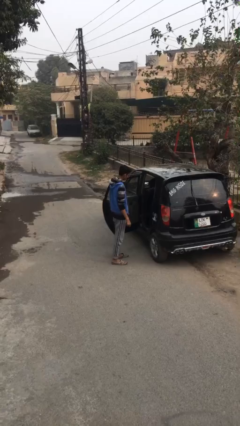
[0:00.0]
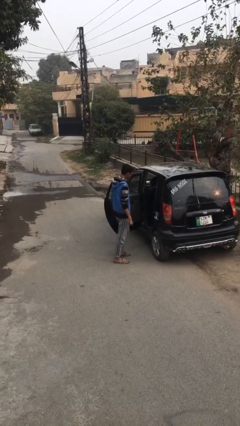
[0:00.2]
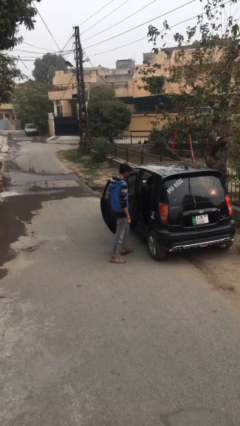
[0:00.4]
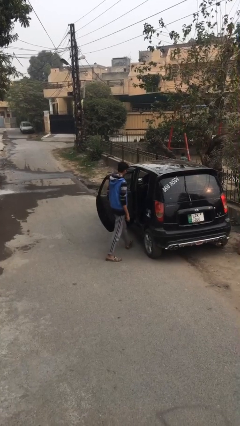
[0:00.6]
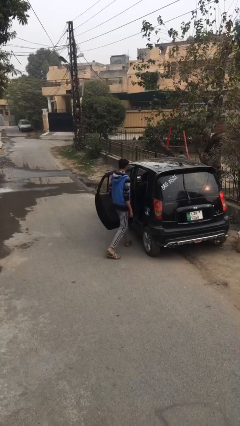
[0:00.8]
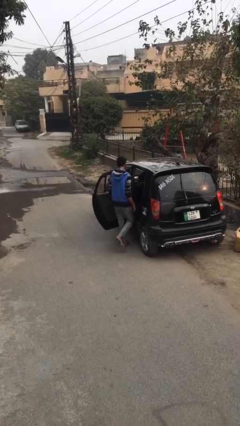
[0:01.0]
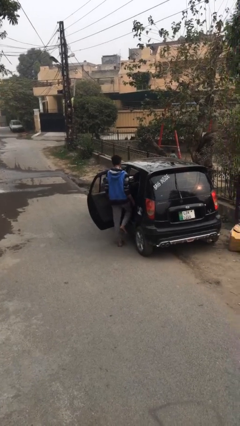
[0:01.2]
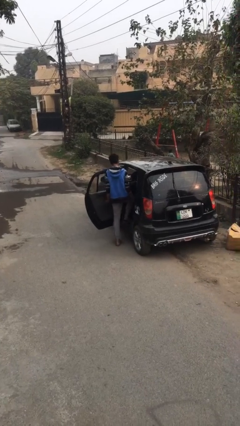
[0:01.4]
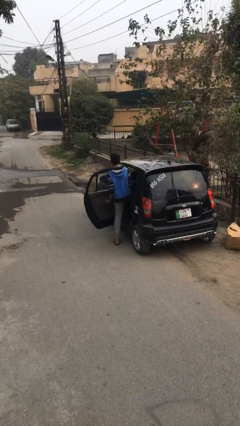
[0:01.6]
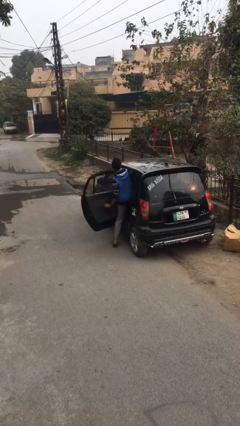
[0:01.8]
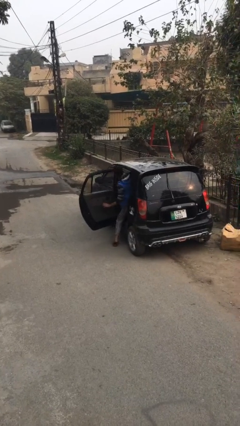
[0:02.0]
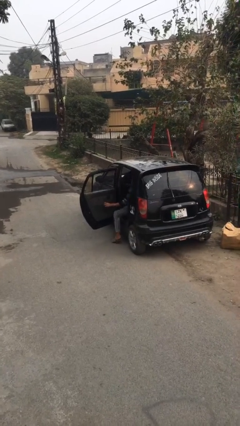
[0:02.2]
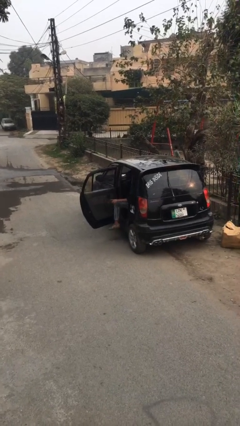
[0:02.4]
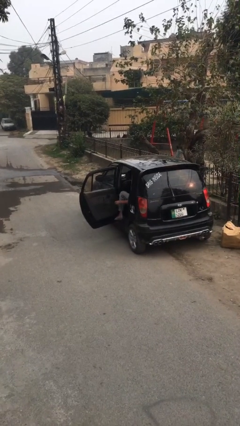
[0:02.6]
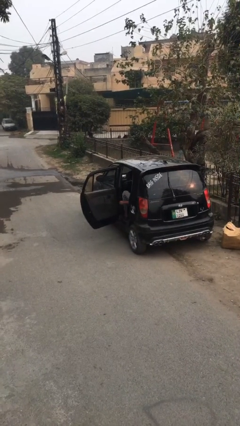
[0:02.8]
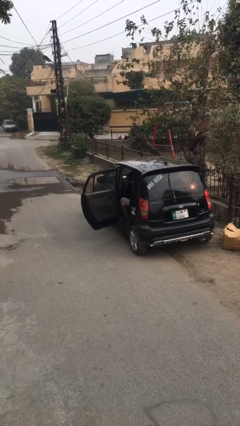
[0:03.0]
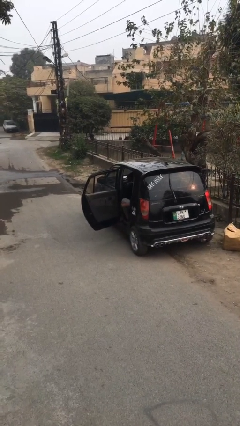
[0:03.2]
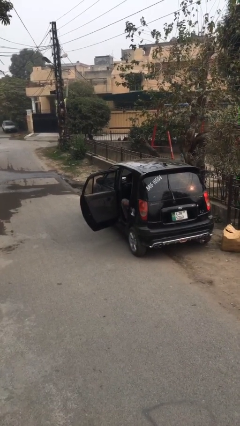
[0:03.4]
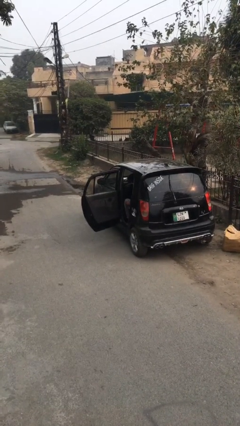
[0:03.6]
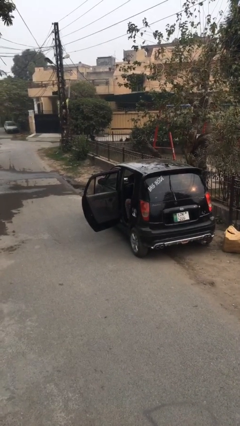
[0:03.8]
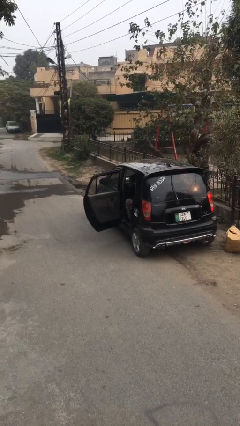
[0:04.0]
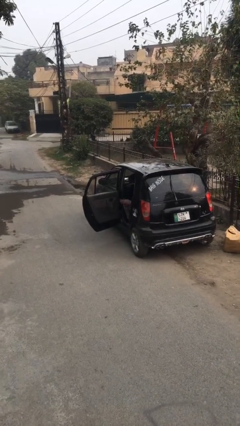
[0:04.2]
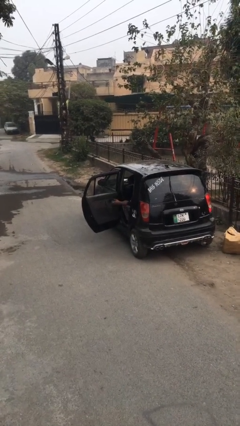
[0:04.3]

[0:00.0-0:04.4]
person enters car

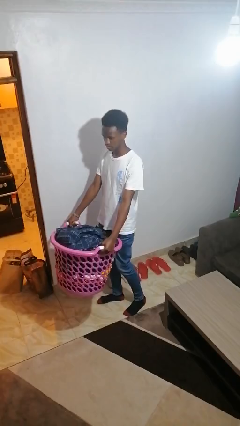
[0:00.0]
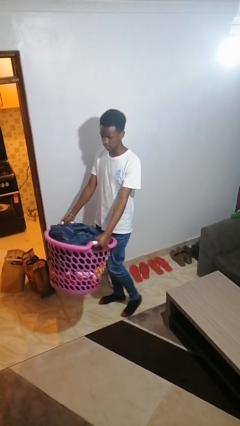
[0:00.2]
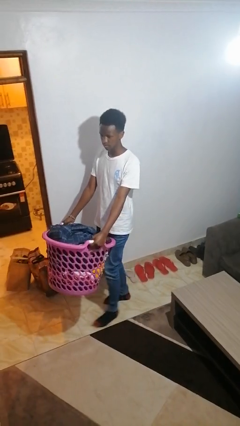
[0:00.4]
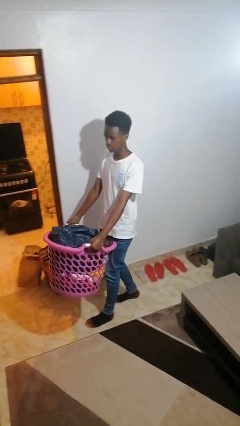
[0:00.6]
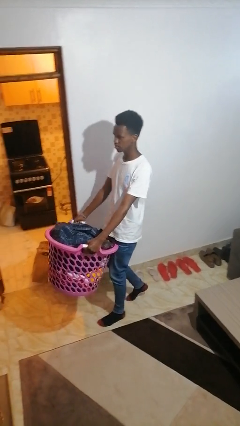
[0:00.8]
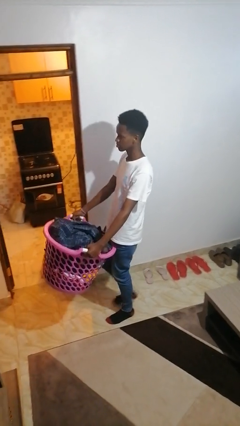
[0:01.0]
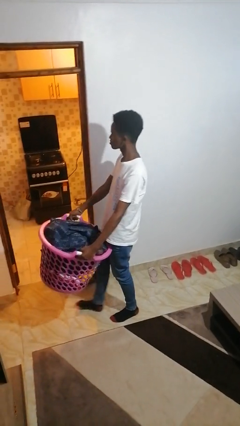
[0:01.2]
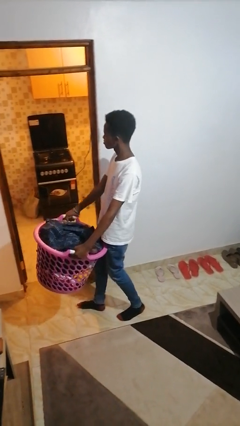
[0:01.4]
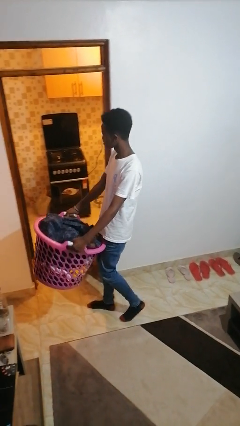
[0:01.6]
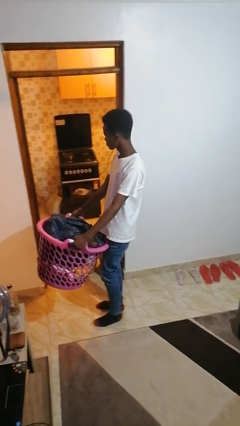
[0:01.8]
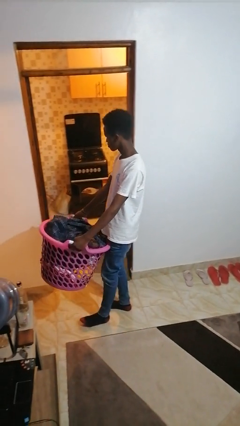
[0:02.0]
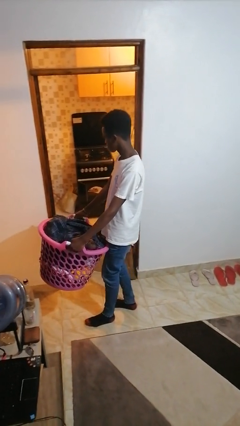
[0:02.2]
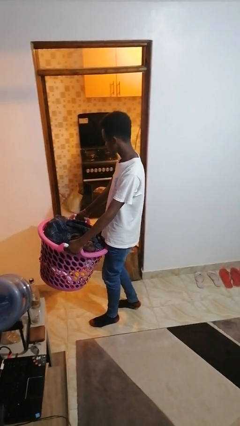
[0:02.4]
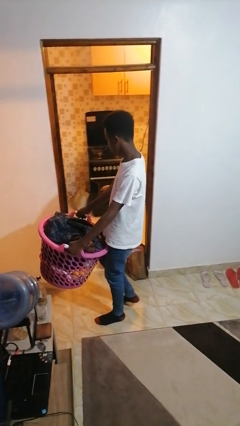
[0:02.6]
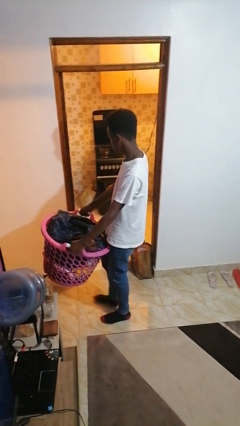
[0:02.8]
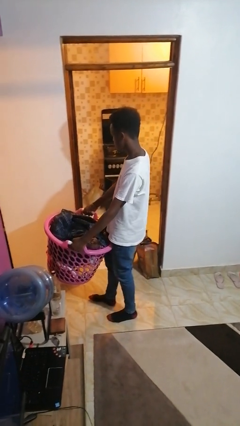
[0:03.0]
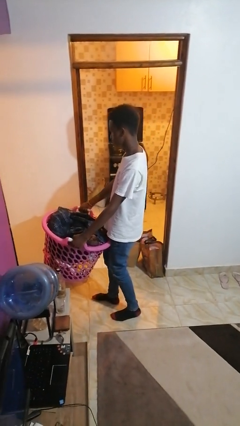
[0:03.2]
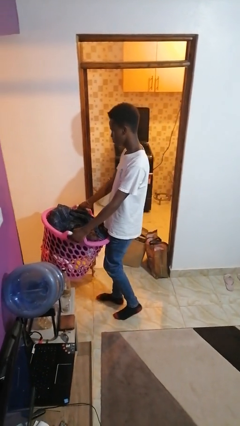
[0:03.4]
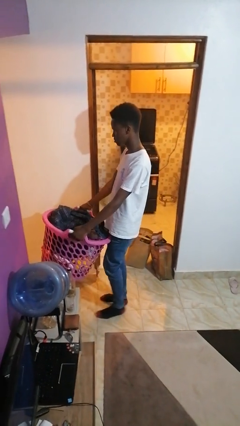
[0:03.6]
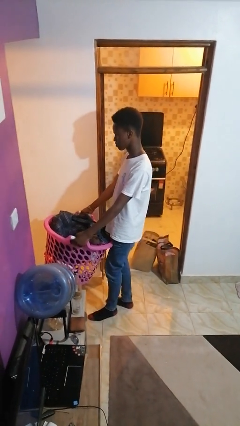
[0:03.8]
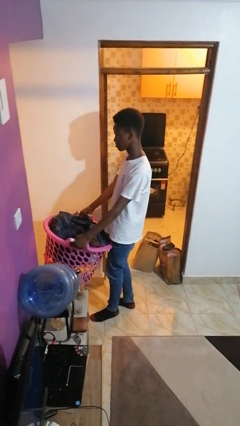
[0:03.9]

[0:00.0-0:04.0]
person carries laundry basket

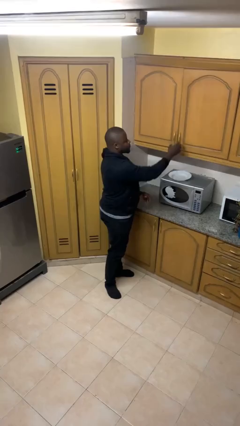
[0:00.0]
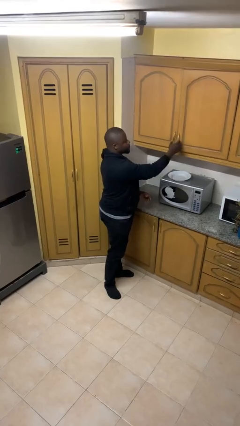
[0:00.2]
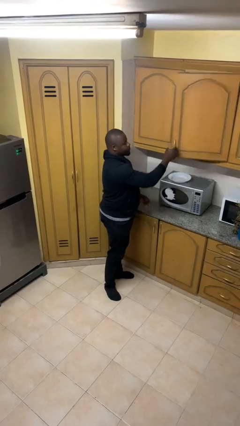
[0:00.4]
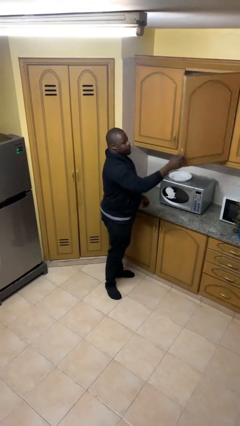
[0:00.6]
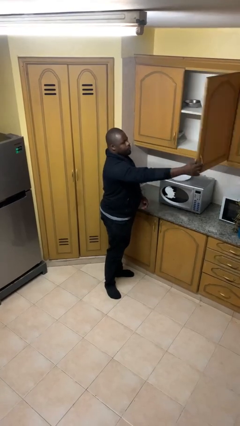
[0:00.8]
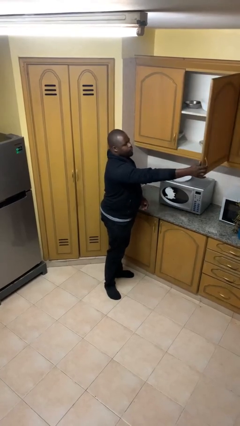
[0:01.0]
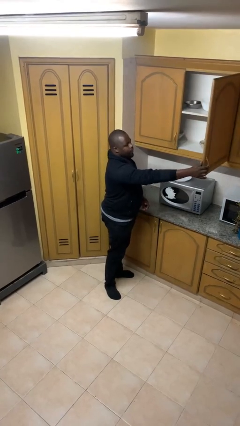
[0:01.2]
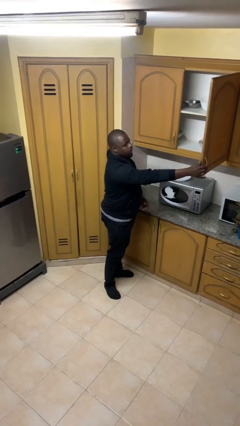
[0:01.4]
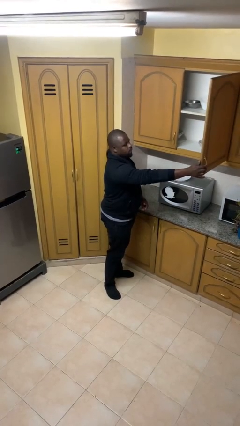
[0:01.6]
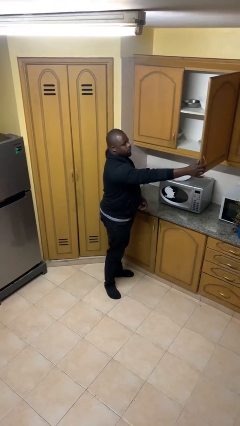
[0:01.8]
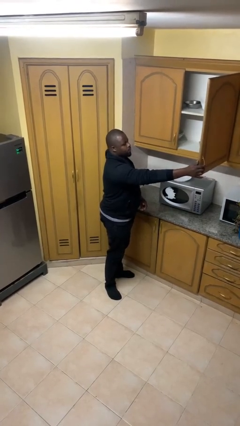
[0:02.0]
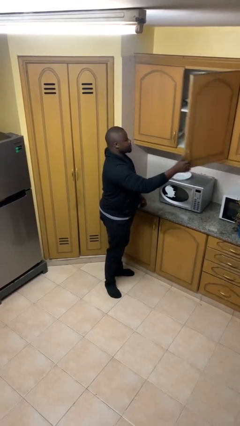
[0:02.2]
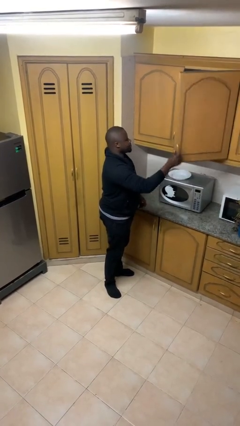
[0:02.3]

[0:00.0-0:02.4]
person opens cabinet

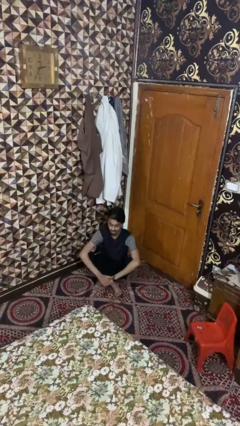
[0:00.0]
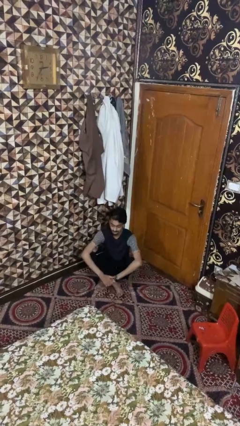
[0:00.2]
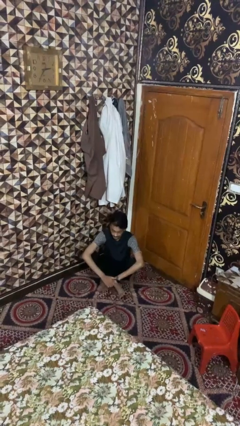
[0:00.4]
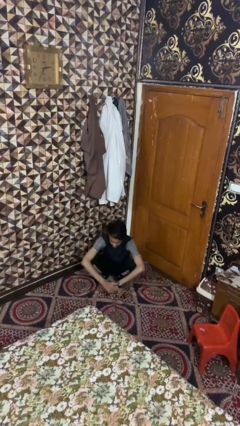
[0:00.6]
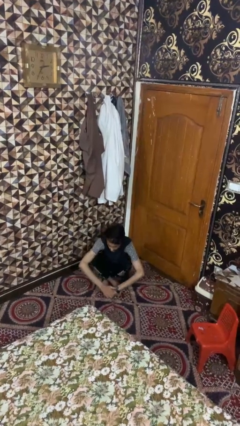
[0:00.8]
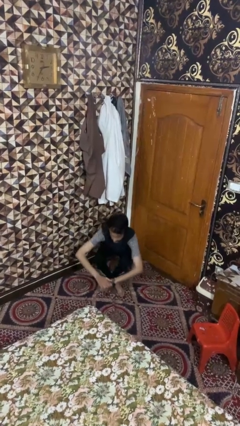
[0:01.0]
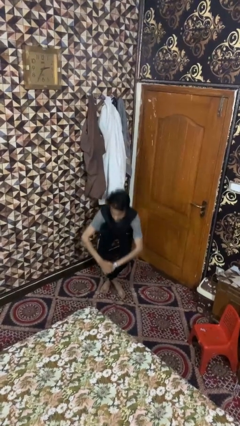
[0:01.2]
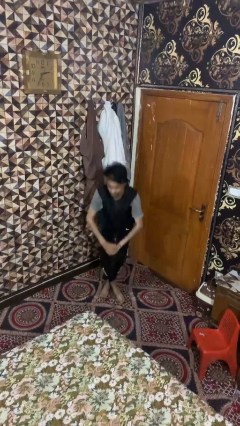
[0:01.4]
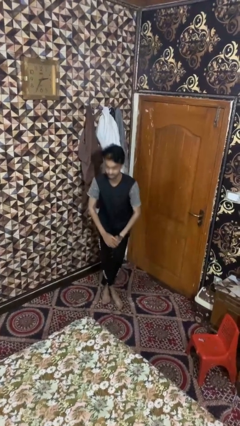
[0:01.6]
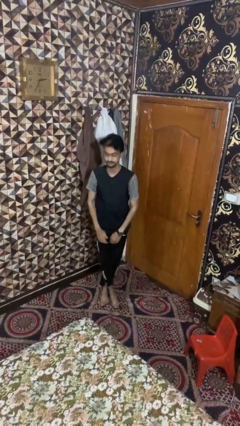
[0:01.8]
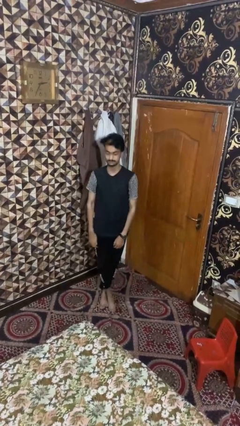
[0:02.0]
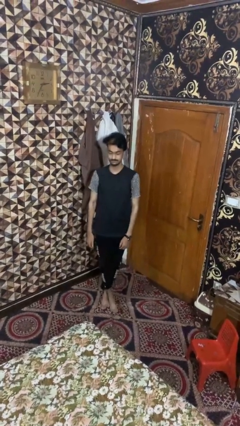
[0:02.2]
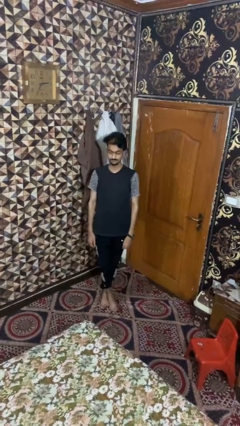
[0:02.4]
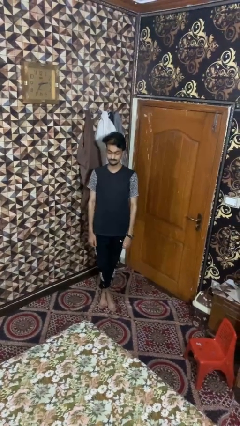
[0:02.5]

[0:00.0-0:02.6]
person stands up from floor

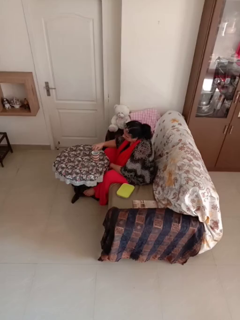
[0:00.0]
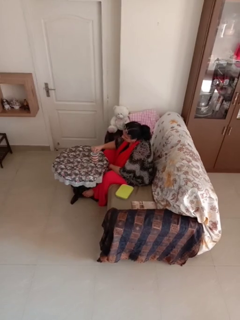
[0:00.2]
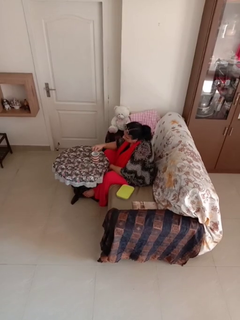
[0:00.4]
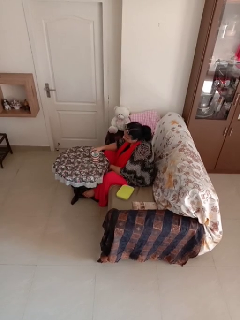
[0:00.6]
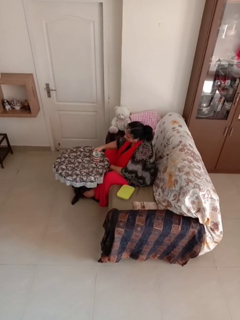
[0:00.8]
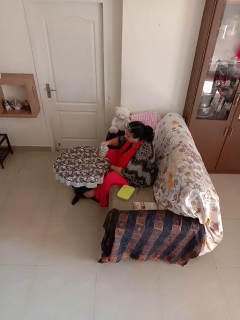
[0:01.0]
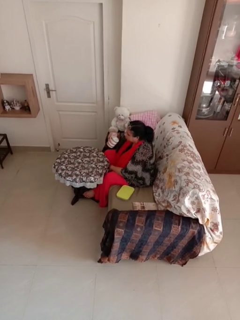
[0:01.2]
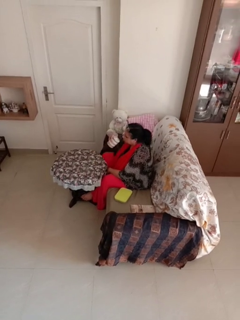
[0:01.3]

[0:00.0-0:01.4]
person stirs mug

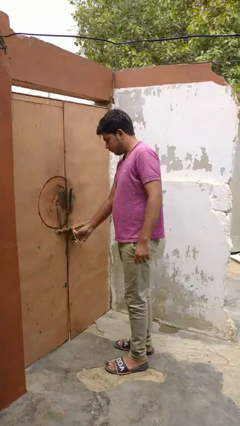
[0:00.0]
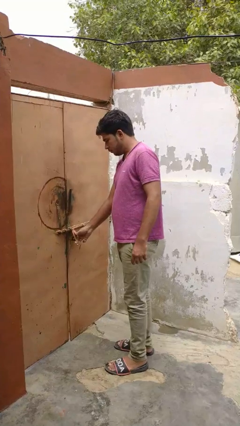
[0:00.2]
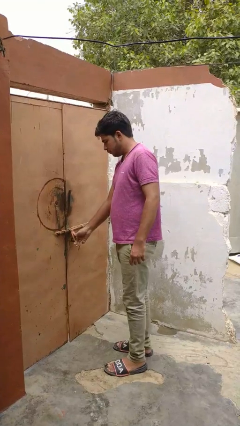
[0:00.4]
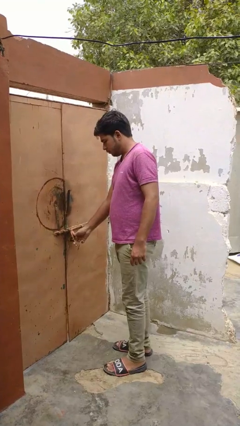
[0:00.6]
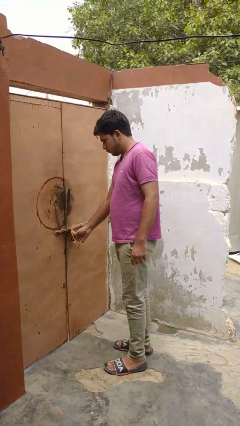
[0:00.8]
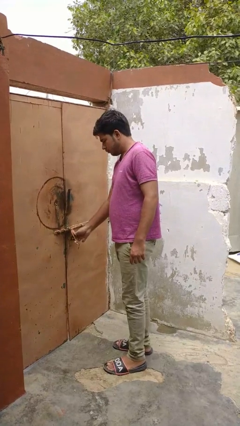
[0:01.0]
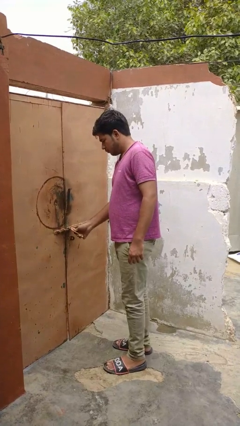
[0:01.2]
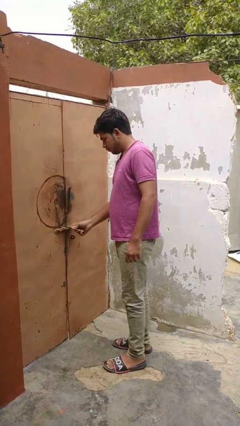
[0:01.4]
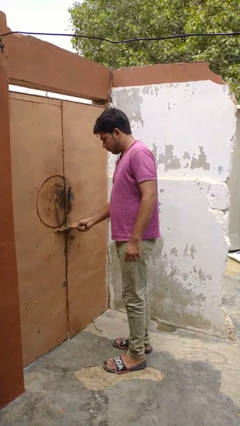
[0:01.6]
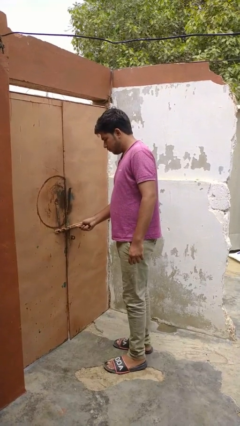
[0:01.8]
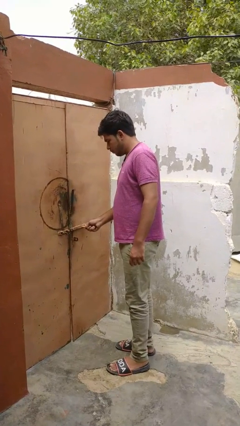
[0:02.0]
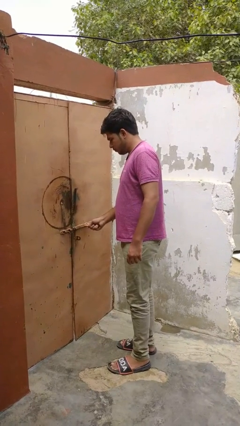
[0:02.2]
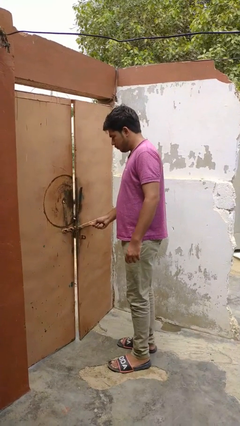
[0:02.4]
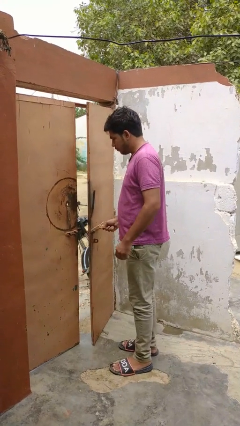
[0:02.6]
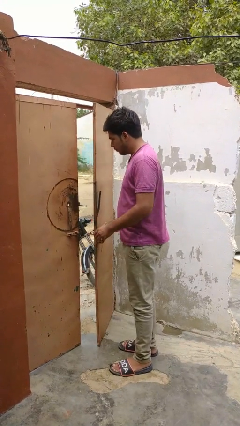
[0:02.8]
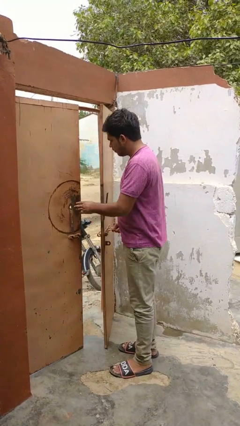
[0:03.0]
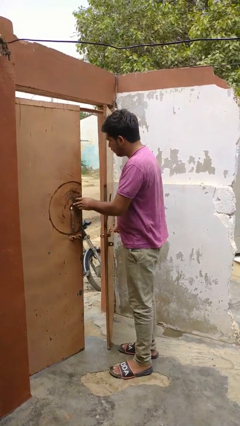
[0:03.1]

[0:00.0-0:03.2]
person unlocks door with keys
